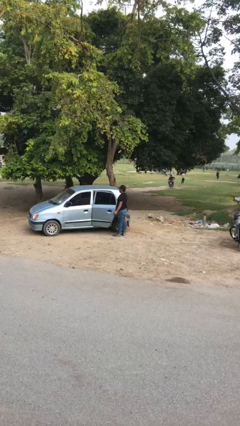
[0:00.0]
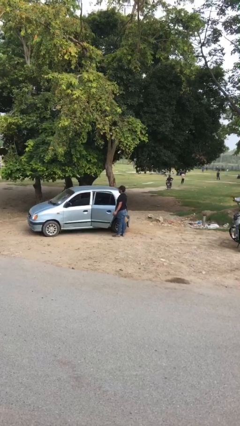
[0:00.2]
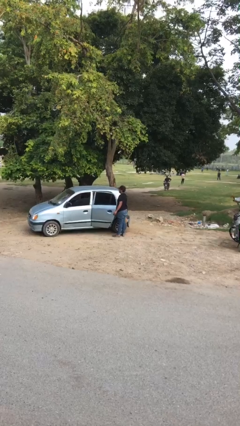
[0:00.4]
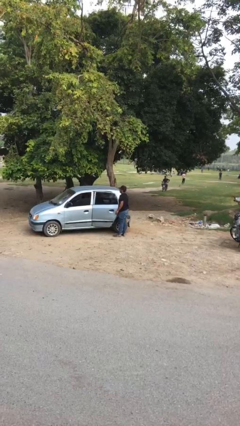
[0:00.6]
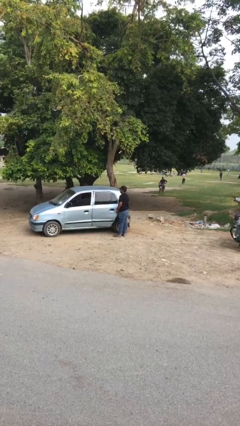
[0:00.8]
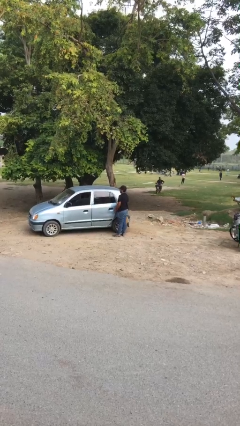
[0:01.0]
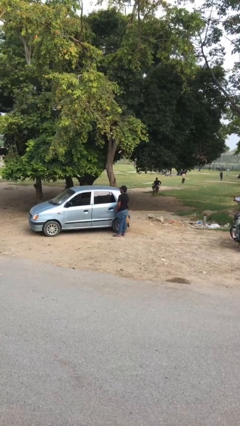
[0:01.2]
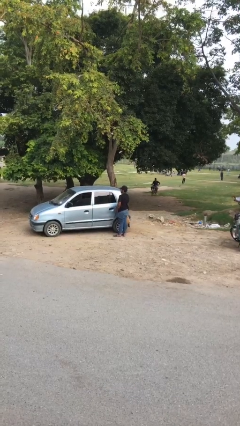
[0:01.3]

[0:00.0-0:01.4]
person closes car door

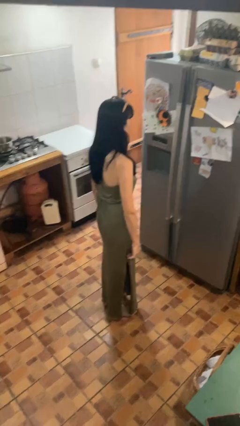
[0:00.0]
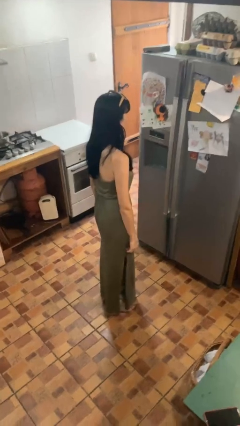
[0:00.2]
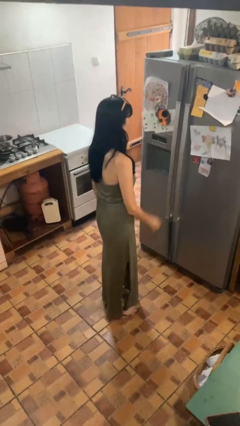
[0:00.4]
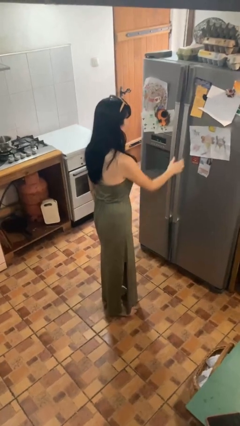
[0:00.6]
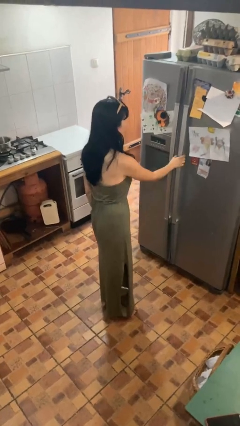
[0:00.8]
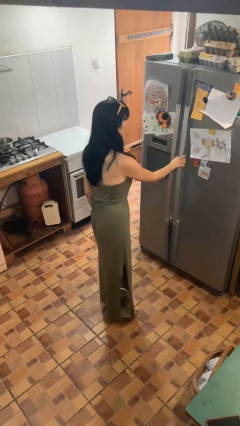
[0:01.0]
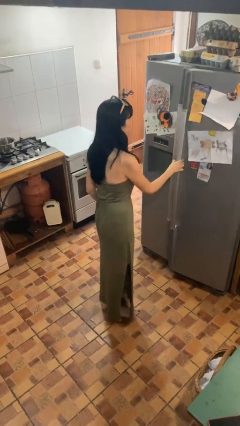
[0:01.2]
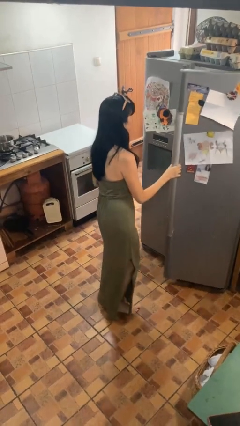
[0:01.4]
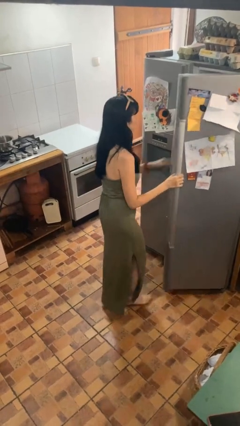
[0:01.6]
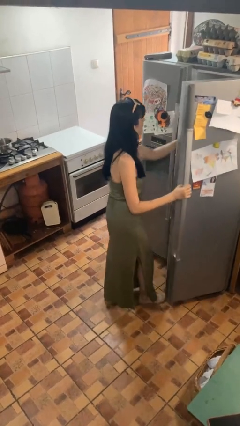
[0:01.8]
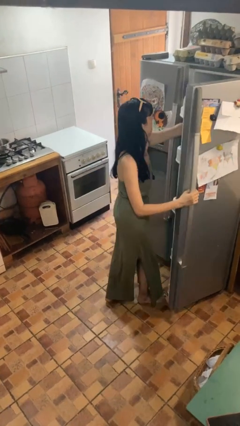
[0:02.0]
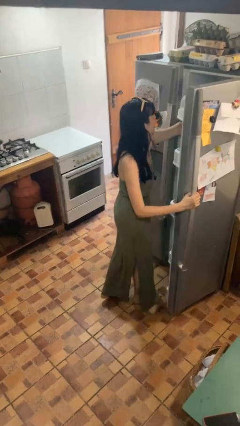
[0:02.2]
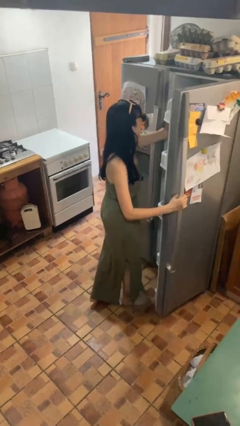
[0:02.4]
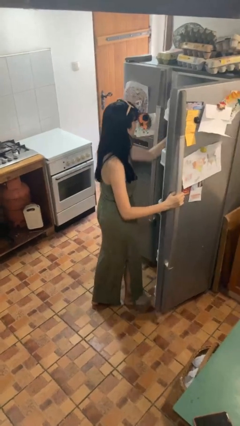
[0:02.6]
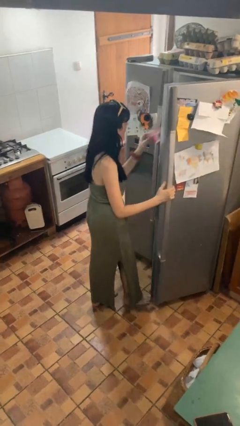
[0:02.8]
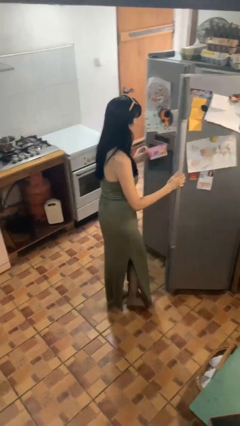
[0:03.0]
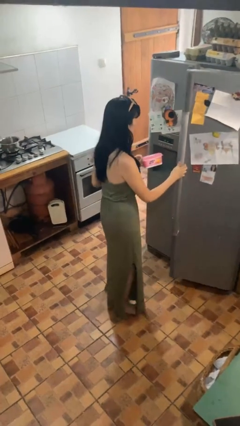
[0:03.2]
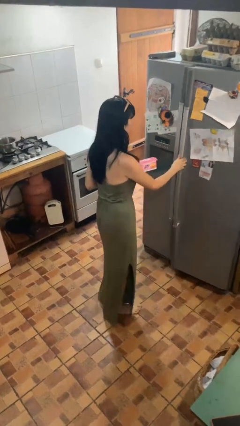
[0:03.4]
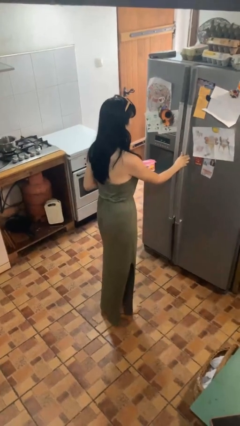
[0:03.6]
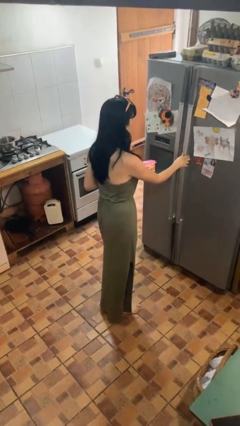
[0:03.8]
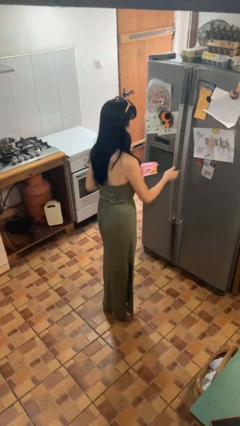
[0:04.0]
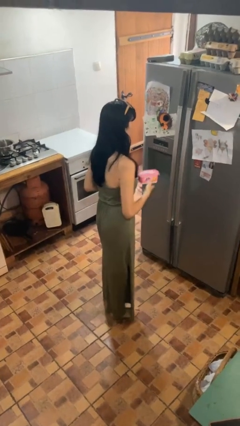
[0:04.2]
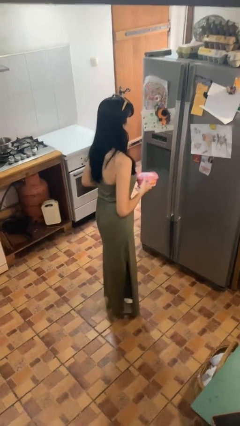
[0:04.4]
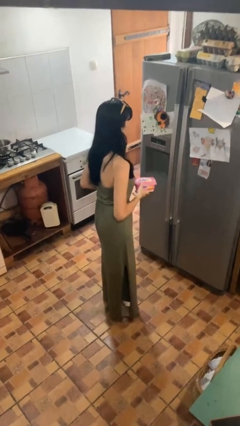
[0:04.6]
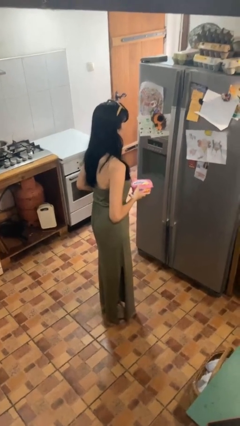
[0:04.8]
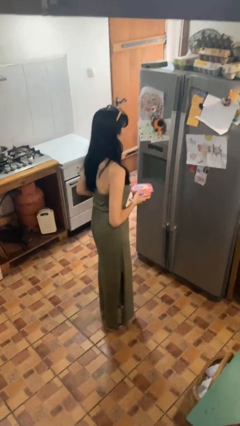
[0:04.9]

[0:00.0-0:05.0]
person takes object from refrigerator

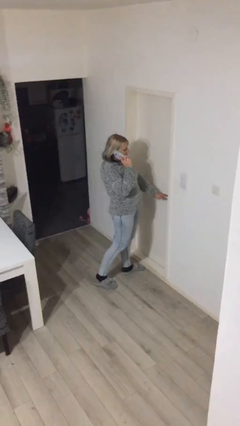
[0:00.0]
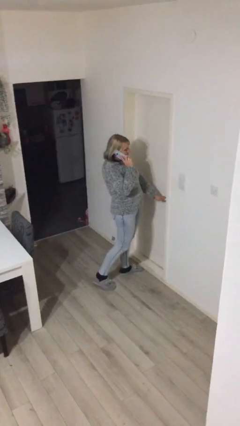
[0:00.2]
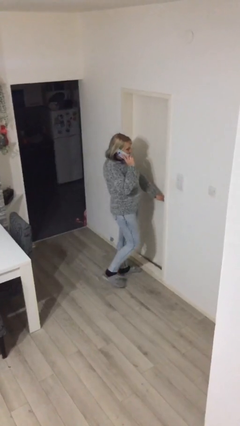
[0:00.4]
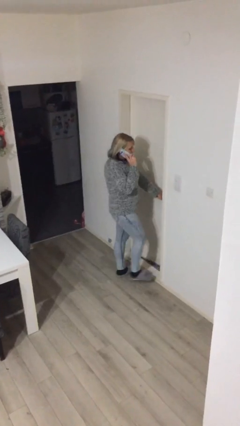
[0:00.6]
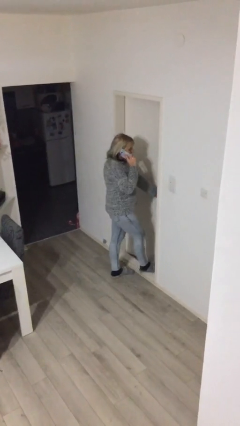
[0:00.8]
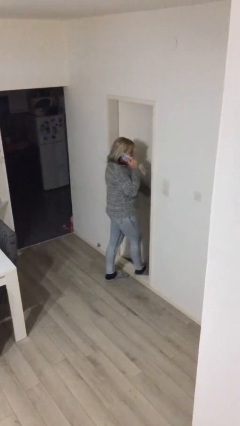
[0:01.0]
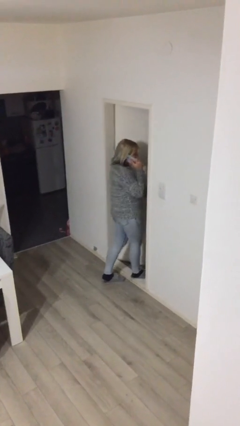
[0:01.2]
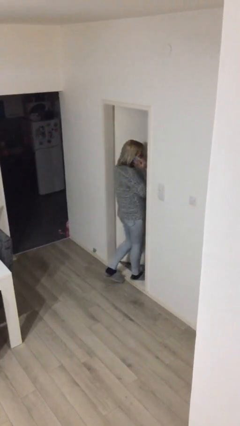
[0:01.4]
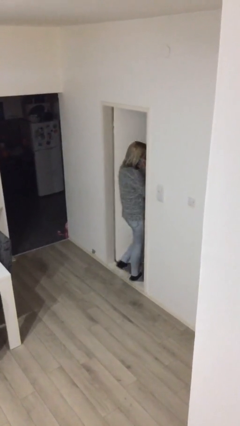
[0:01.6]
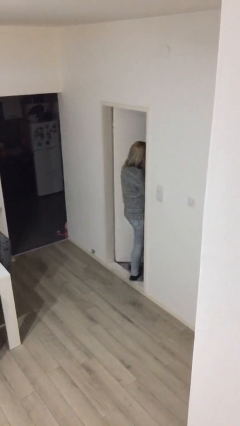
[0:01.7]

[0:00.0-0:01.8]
person opens facility door

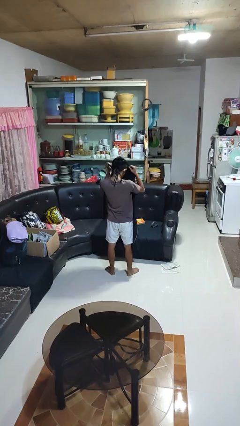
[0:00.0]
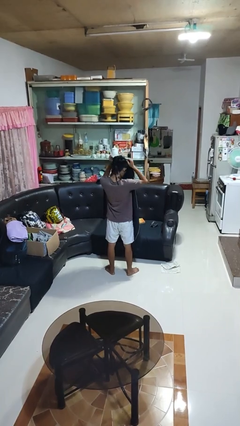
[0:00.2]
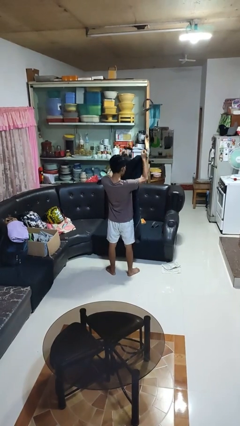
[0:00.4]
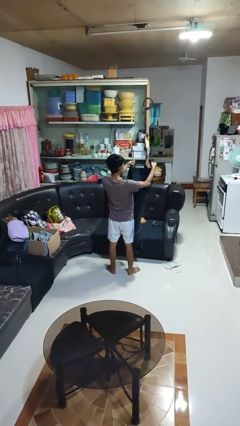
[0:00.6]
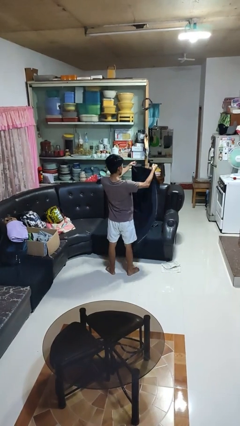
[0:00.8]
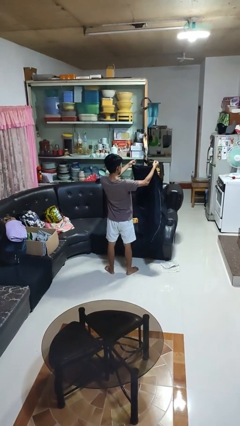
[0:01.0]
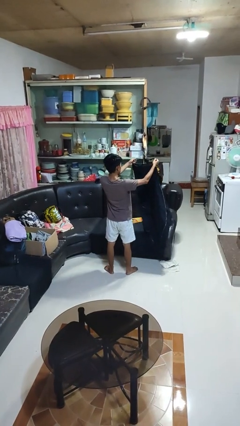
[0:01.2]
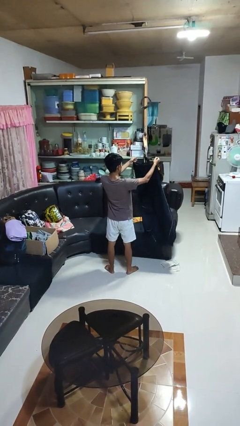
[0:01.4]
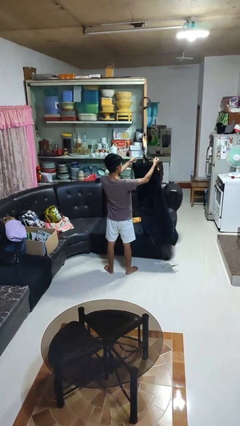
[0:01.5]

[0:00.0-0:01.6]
person takes off apron

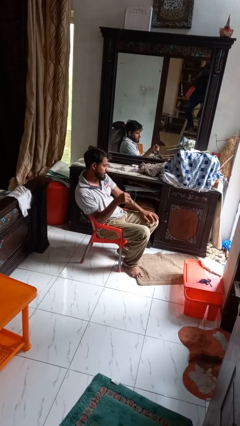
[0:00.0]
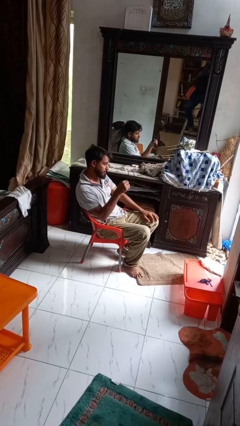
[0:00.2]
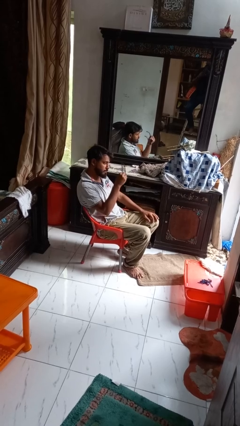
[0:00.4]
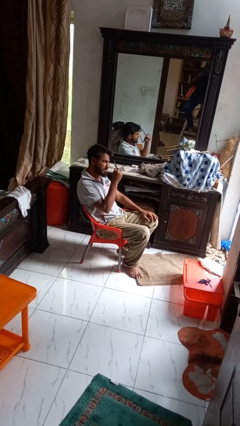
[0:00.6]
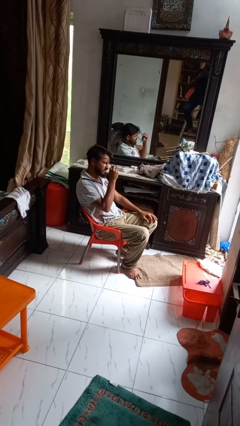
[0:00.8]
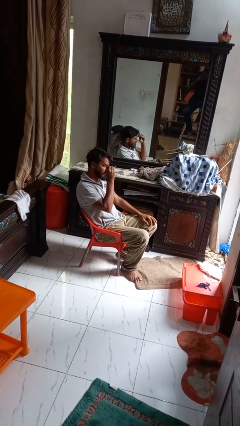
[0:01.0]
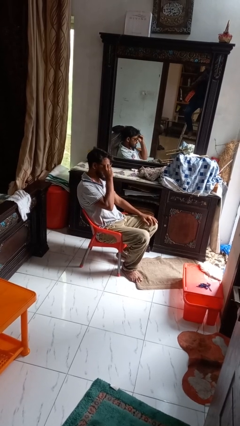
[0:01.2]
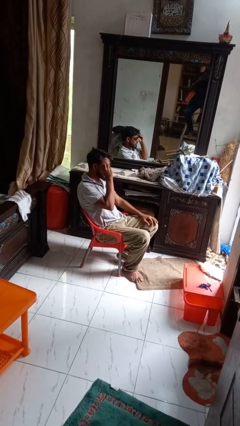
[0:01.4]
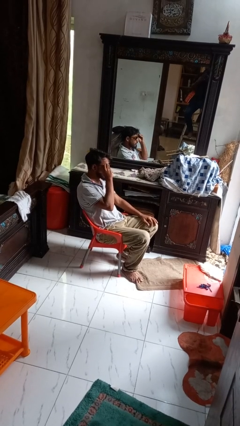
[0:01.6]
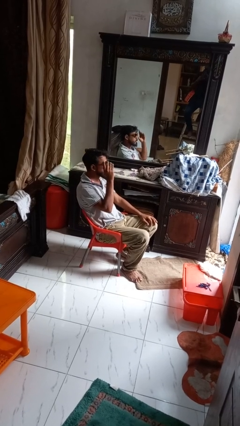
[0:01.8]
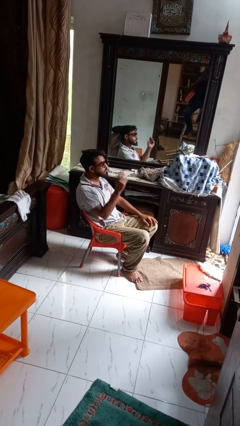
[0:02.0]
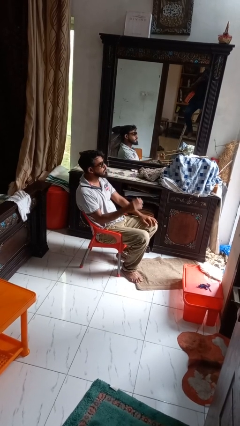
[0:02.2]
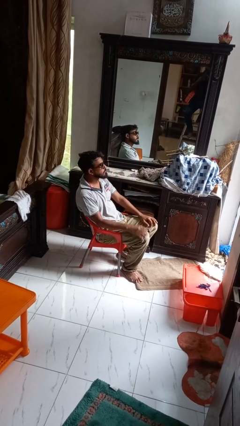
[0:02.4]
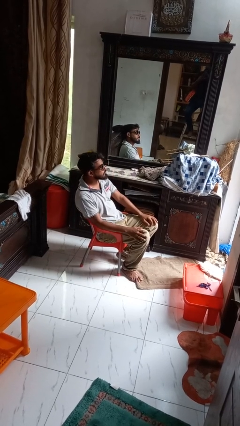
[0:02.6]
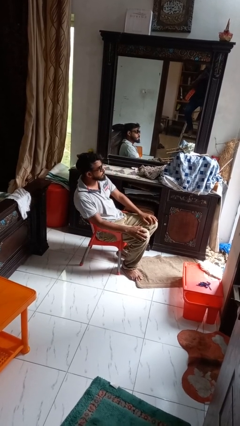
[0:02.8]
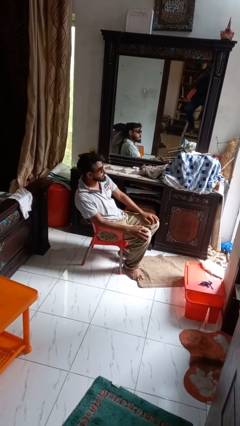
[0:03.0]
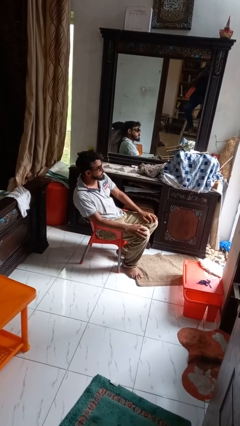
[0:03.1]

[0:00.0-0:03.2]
person puts on sunglasses

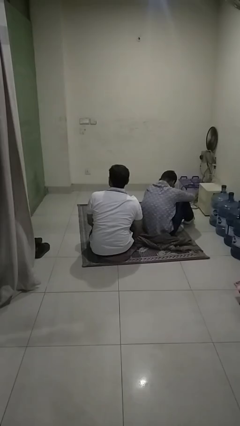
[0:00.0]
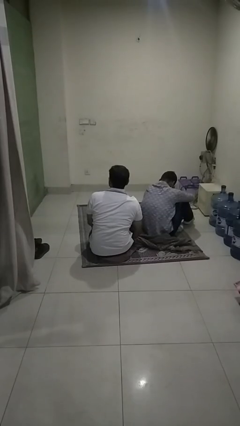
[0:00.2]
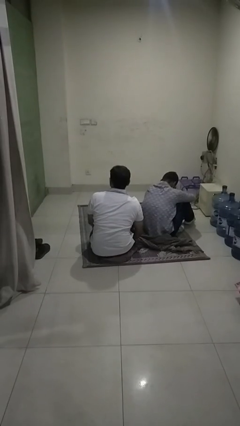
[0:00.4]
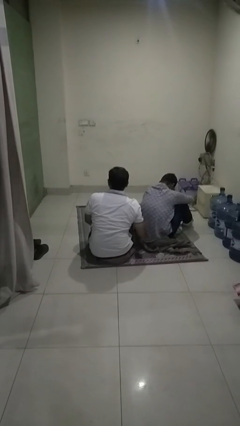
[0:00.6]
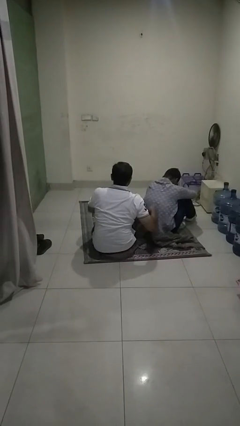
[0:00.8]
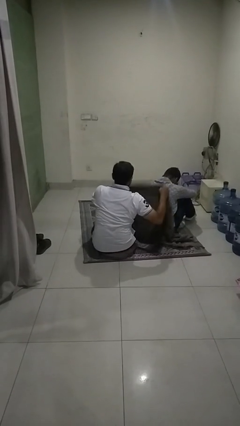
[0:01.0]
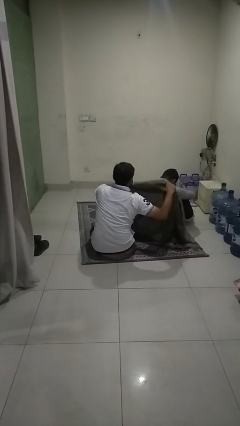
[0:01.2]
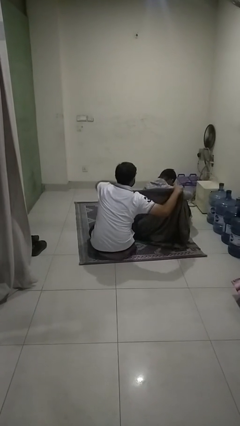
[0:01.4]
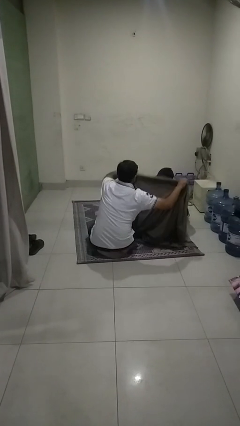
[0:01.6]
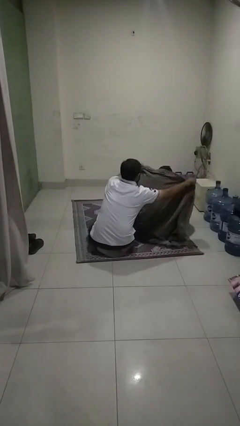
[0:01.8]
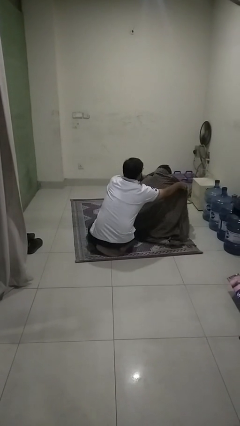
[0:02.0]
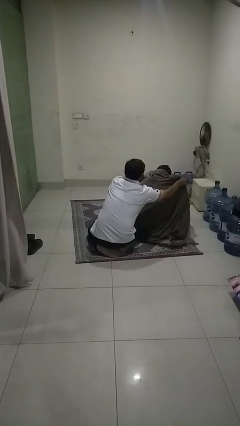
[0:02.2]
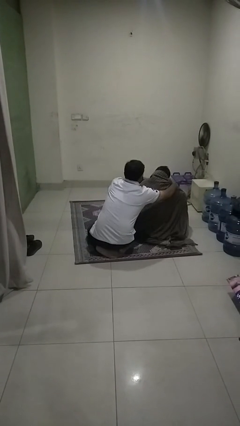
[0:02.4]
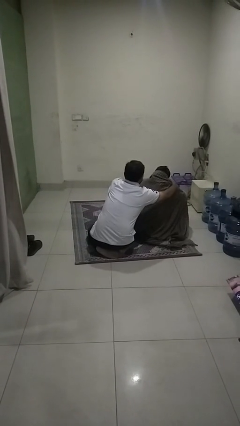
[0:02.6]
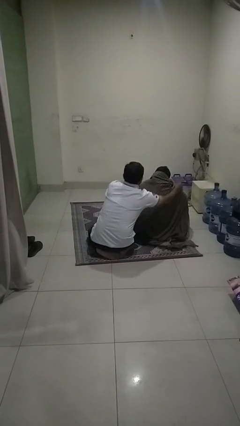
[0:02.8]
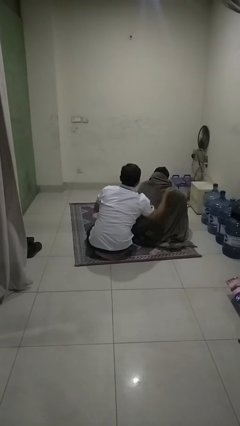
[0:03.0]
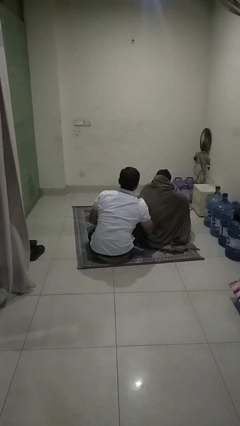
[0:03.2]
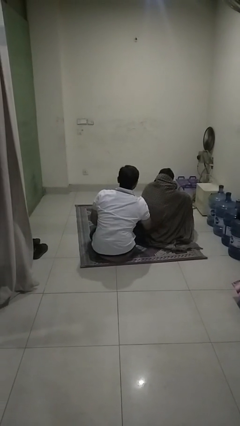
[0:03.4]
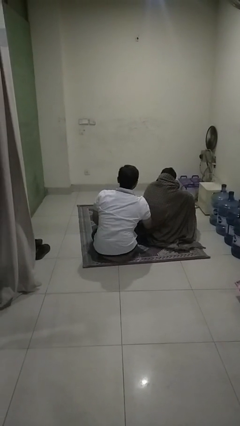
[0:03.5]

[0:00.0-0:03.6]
person covers friend with blanket

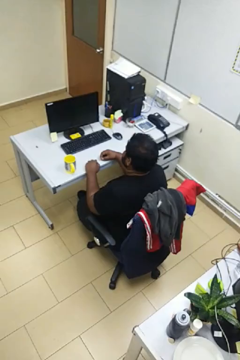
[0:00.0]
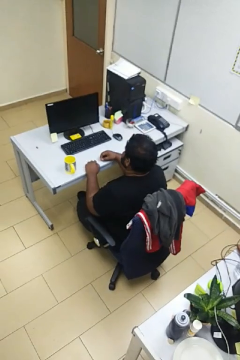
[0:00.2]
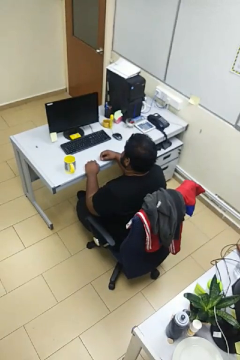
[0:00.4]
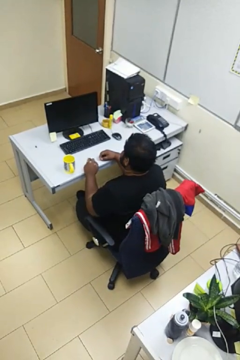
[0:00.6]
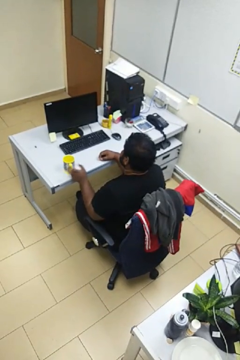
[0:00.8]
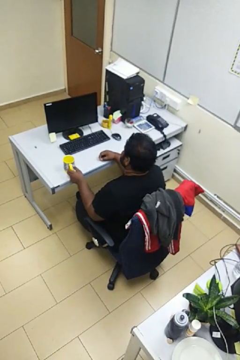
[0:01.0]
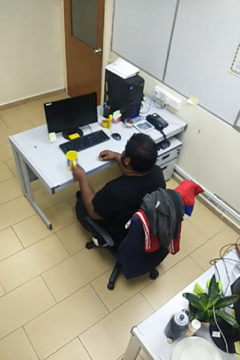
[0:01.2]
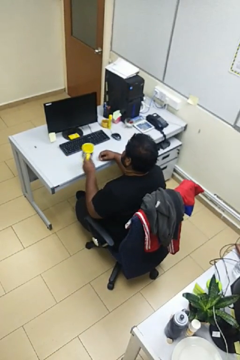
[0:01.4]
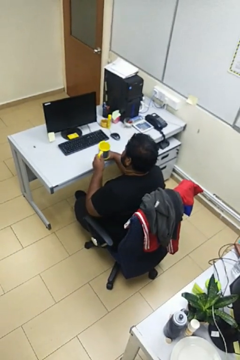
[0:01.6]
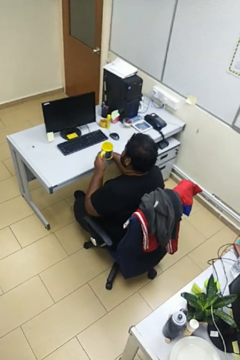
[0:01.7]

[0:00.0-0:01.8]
person picks up object from table
